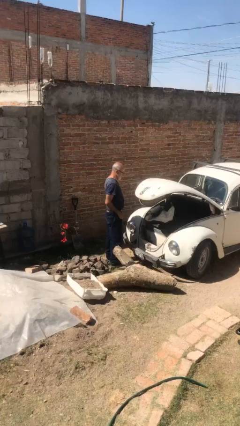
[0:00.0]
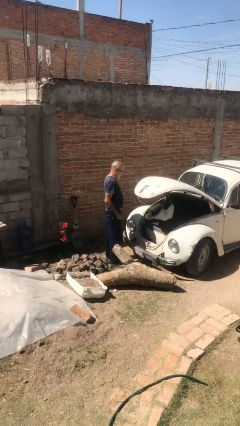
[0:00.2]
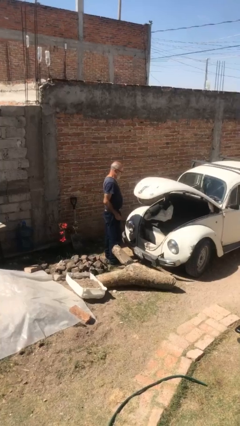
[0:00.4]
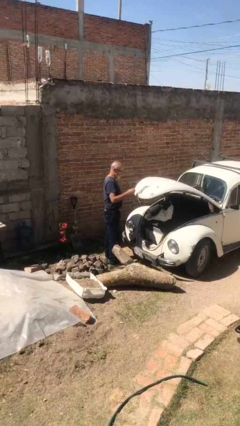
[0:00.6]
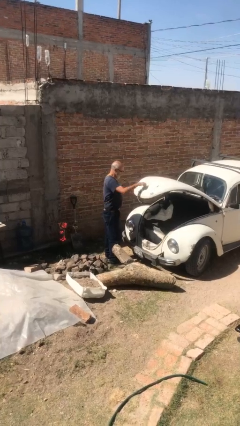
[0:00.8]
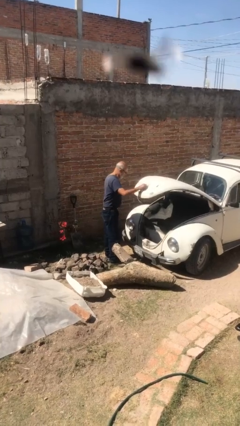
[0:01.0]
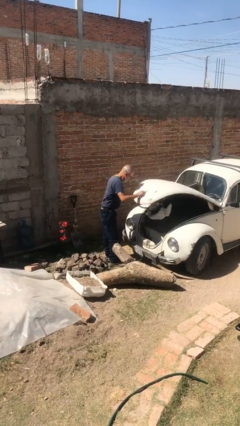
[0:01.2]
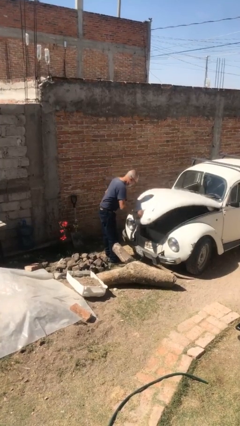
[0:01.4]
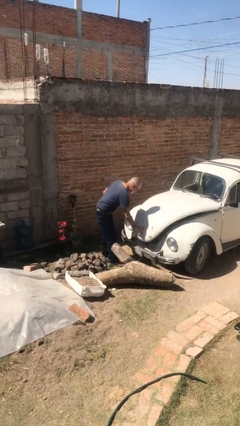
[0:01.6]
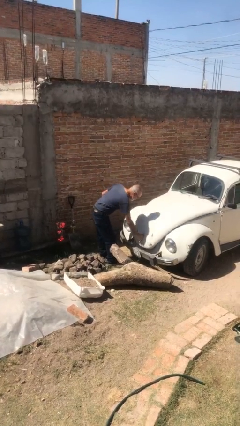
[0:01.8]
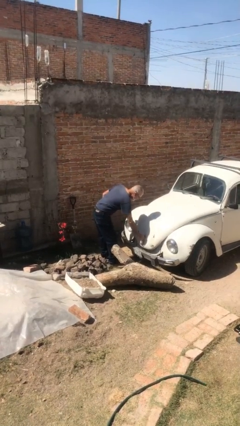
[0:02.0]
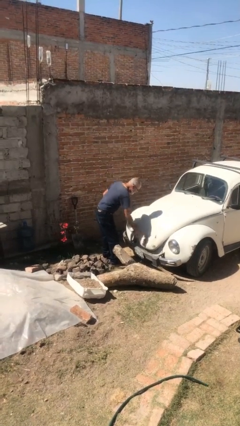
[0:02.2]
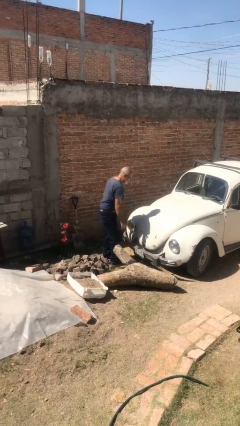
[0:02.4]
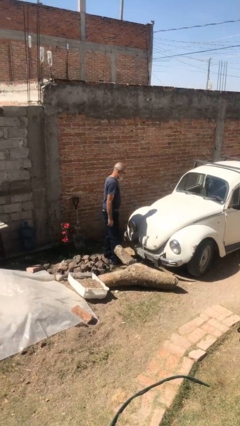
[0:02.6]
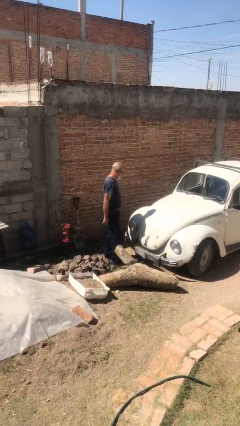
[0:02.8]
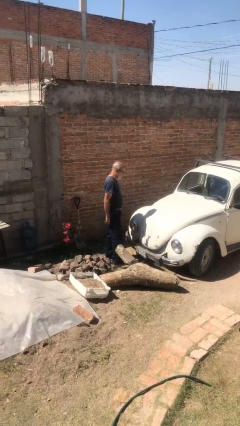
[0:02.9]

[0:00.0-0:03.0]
person closes car trunk

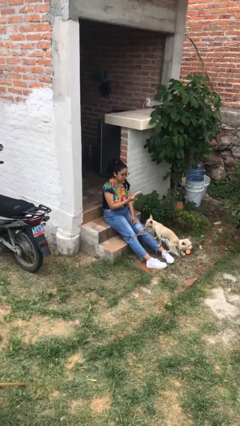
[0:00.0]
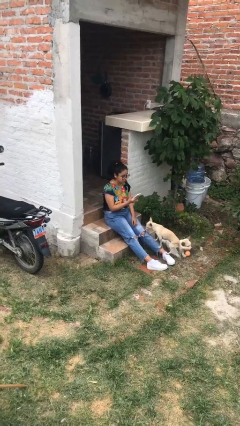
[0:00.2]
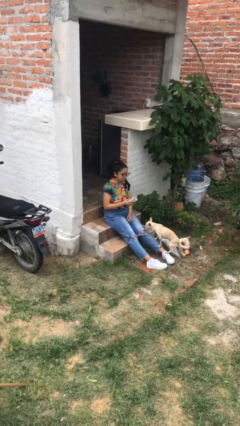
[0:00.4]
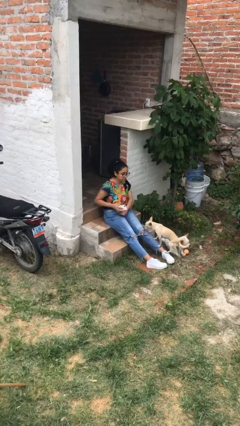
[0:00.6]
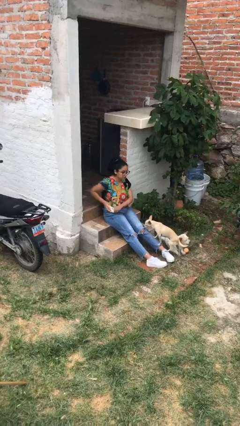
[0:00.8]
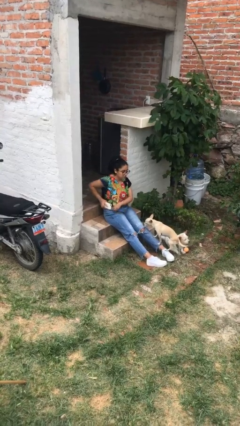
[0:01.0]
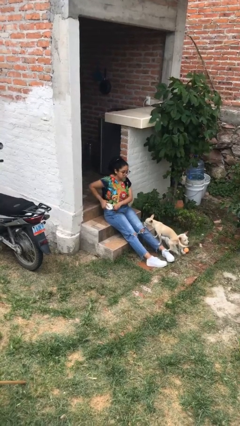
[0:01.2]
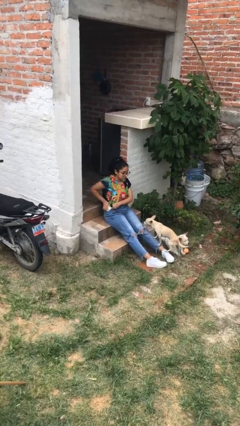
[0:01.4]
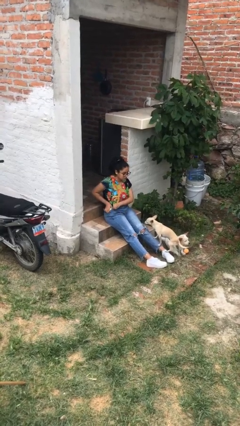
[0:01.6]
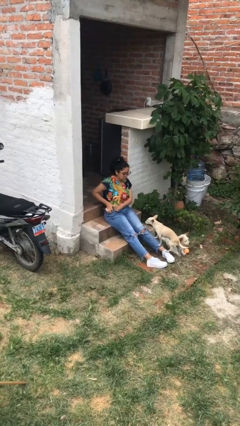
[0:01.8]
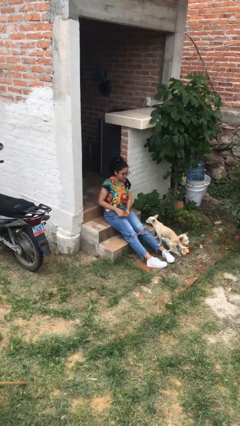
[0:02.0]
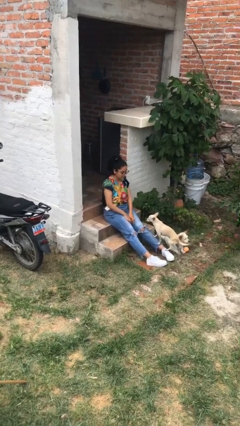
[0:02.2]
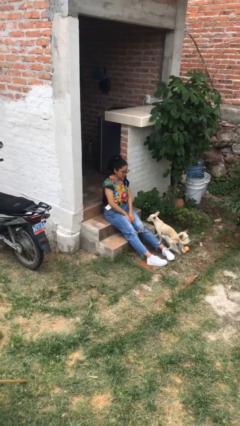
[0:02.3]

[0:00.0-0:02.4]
person puts phone into pocket

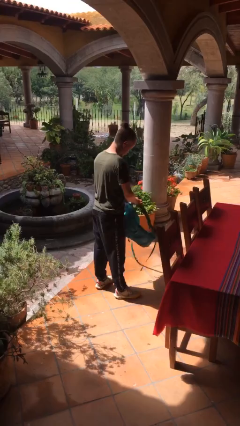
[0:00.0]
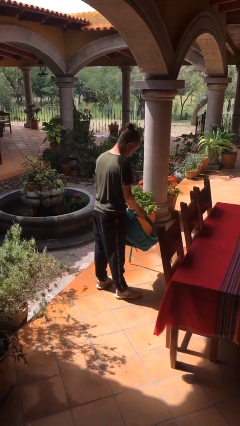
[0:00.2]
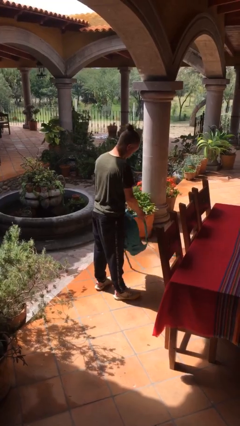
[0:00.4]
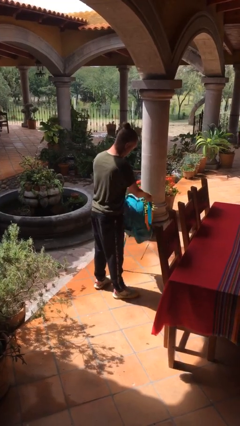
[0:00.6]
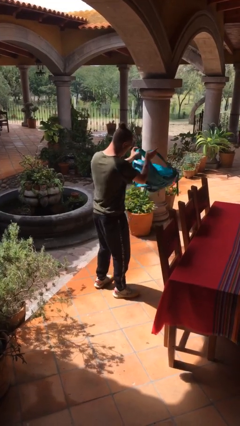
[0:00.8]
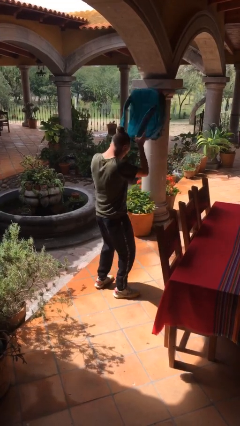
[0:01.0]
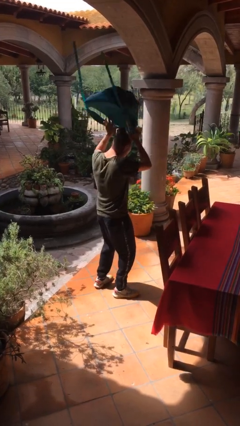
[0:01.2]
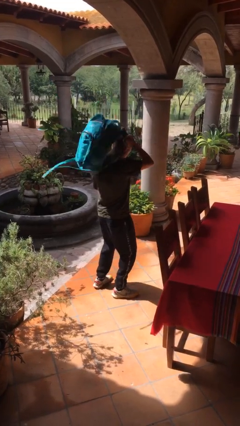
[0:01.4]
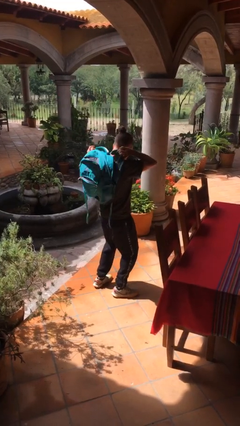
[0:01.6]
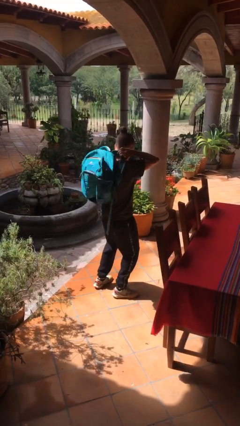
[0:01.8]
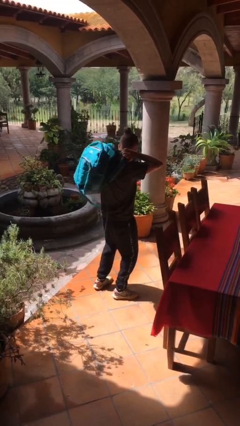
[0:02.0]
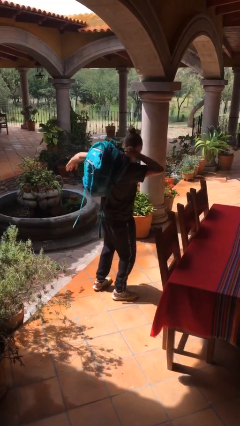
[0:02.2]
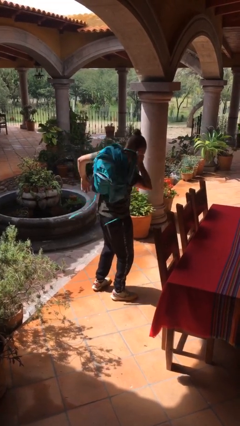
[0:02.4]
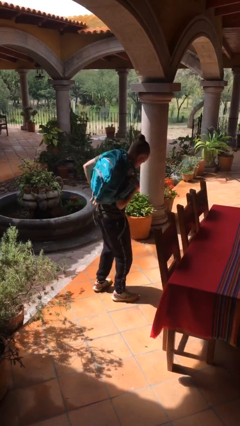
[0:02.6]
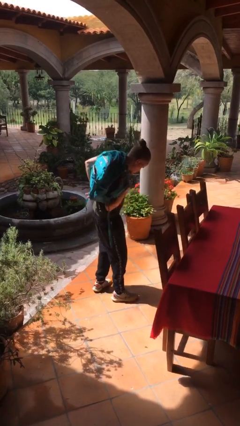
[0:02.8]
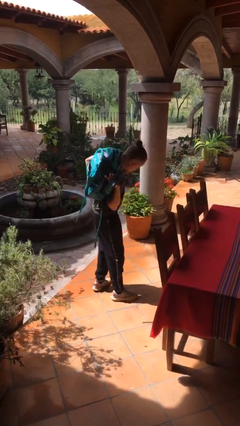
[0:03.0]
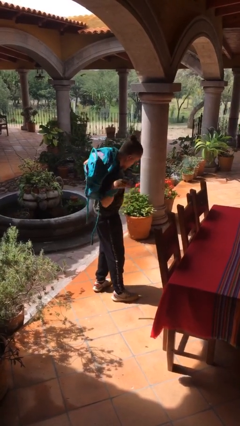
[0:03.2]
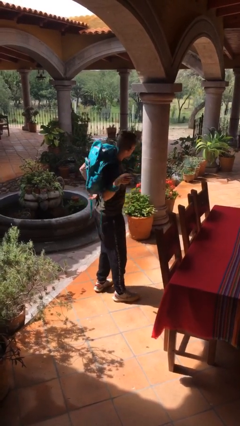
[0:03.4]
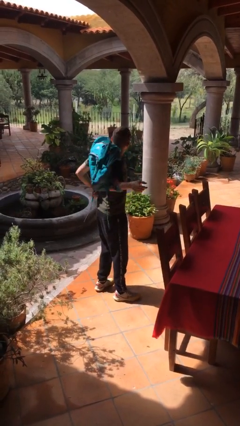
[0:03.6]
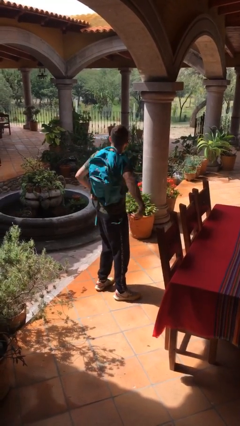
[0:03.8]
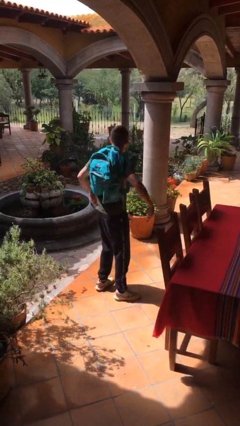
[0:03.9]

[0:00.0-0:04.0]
person puts on backpack

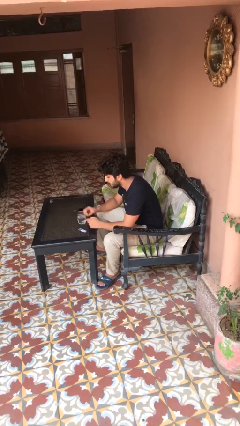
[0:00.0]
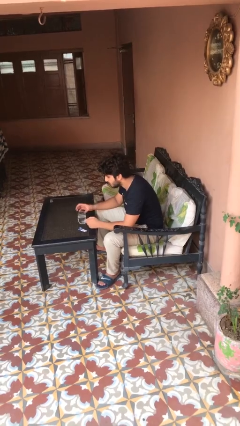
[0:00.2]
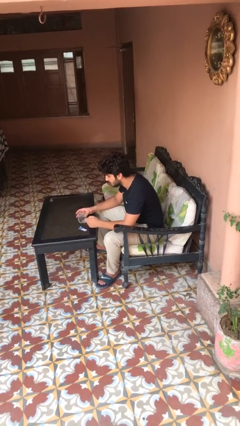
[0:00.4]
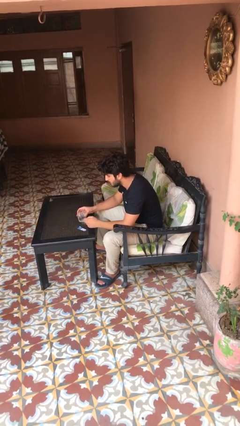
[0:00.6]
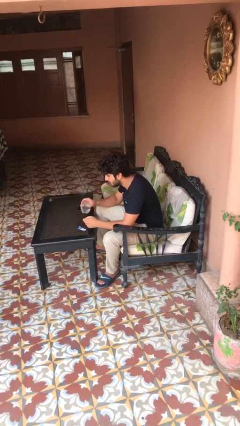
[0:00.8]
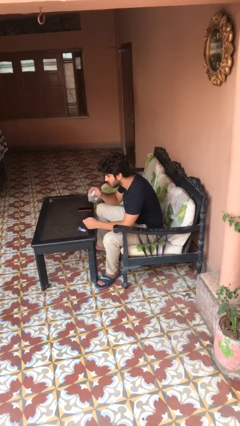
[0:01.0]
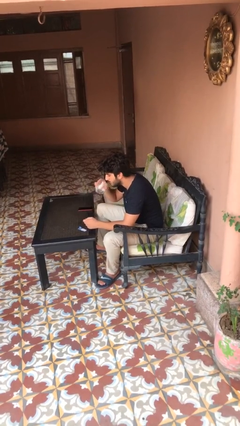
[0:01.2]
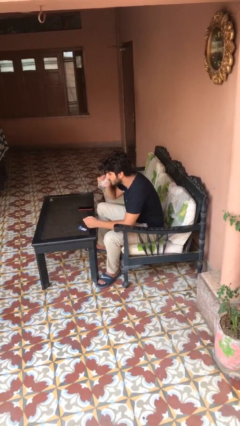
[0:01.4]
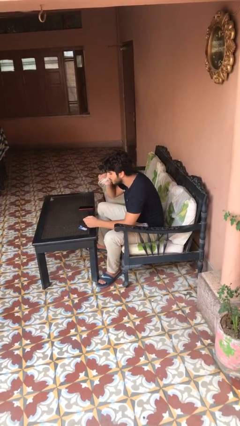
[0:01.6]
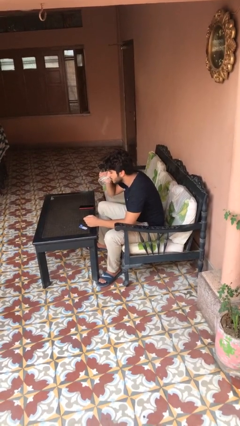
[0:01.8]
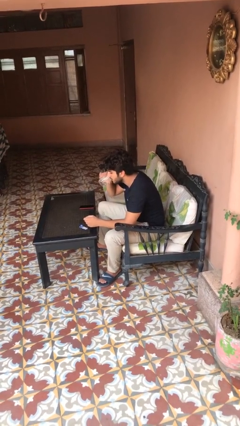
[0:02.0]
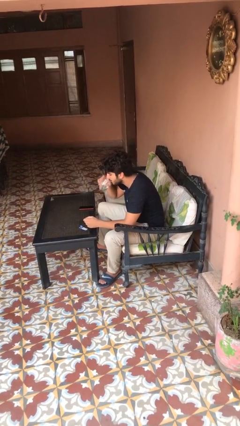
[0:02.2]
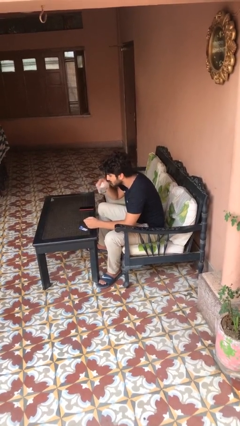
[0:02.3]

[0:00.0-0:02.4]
person drinks from cup

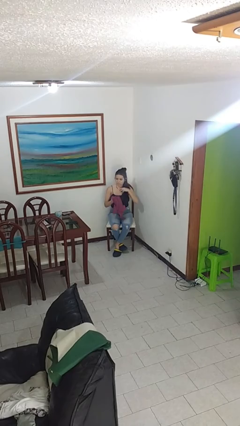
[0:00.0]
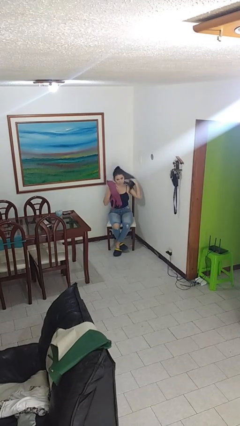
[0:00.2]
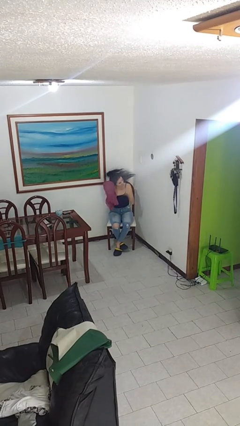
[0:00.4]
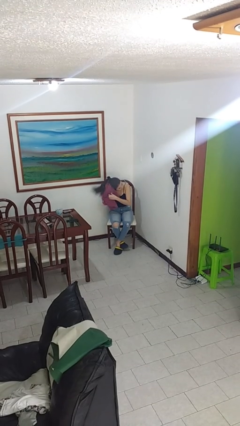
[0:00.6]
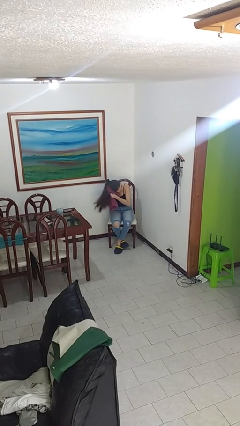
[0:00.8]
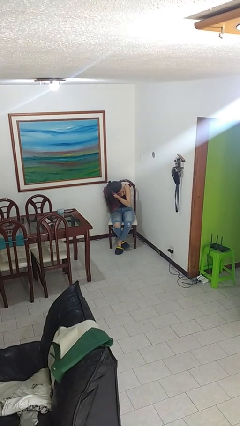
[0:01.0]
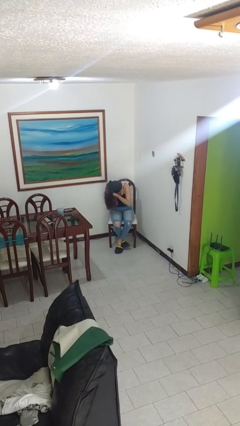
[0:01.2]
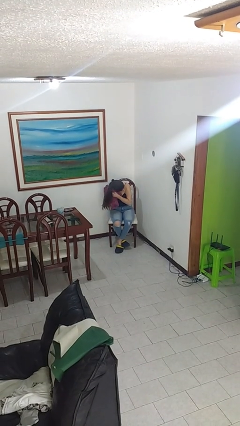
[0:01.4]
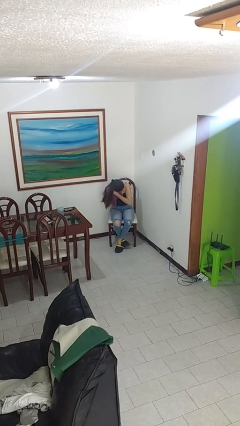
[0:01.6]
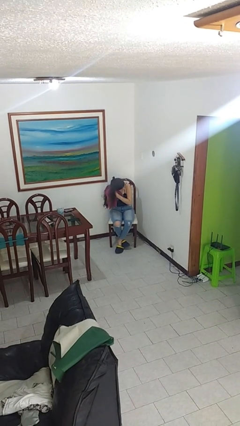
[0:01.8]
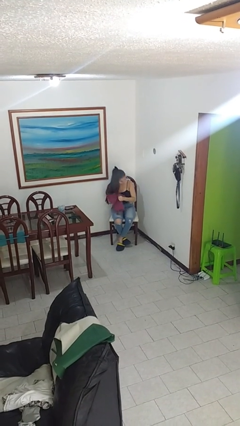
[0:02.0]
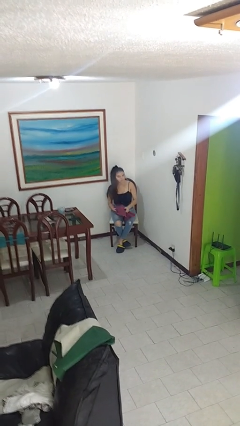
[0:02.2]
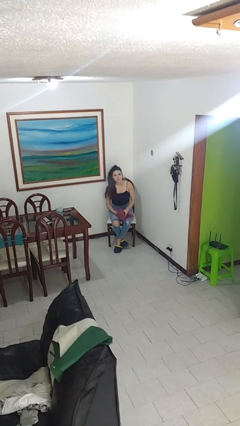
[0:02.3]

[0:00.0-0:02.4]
person dries hair with towel

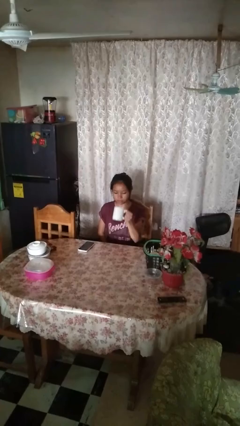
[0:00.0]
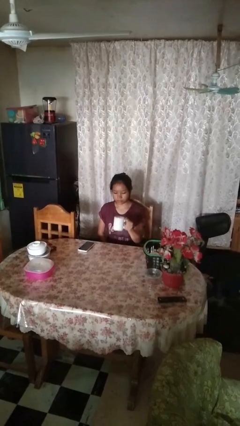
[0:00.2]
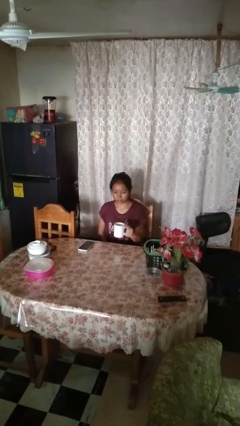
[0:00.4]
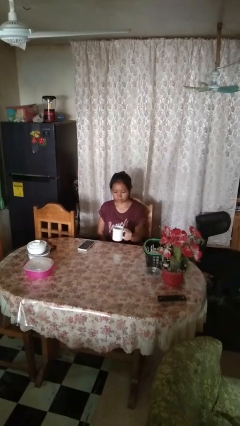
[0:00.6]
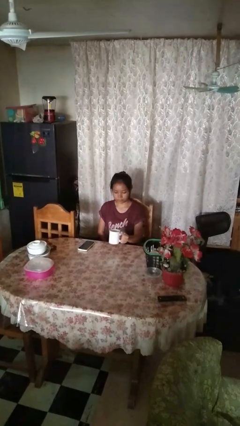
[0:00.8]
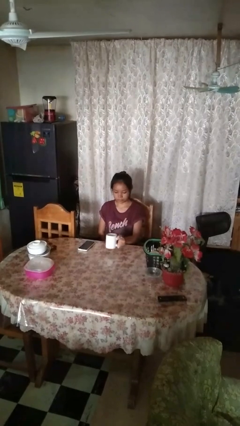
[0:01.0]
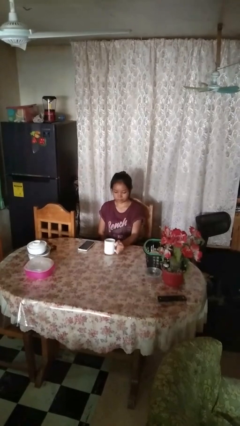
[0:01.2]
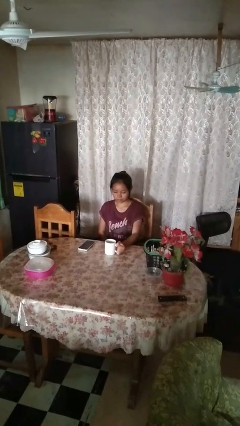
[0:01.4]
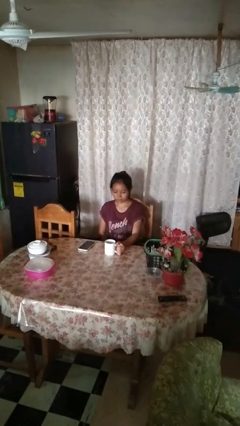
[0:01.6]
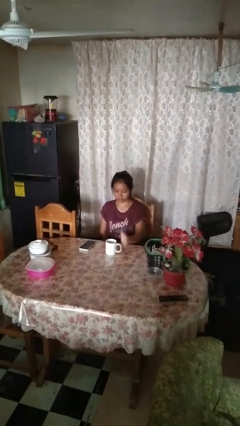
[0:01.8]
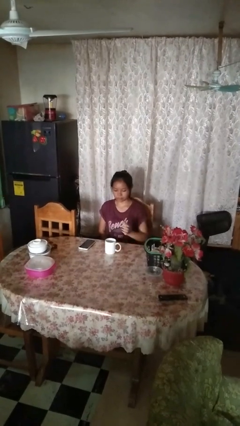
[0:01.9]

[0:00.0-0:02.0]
person puts down object on table

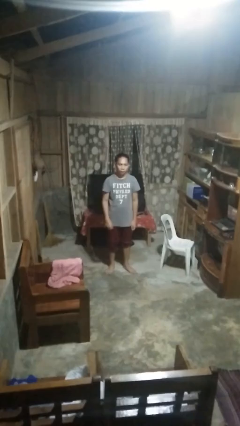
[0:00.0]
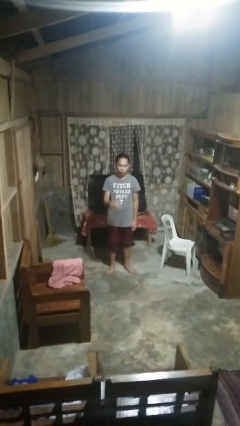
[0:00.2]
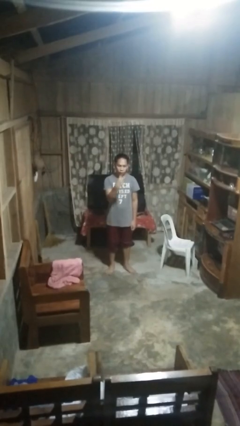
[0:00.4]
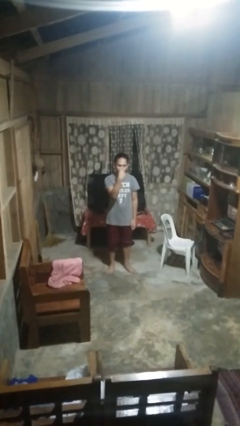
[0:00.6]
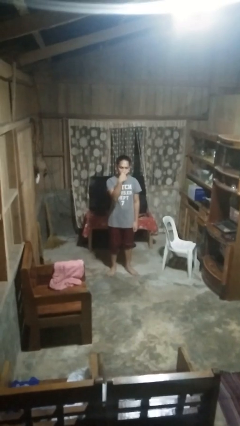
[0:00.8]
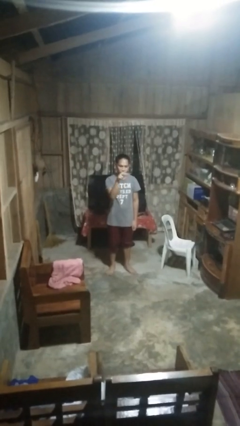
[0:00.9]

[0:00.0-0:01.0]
person gestures watch closely
